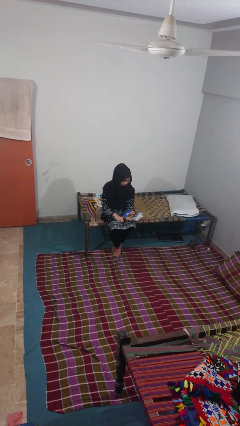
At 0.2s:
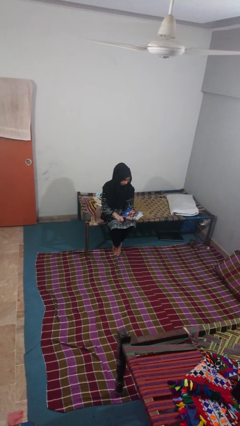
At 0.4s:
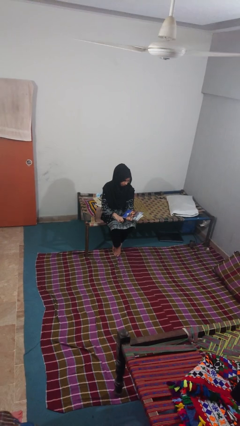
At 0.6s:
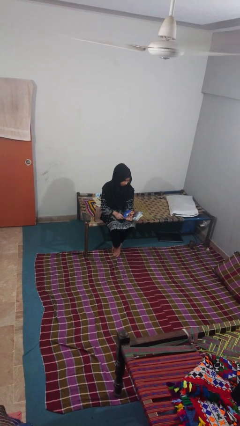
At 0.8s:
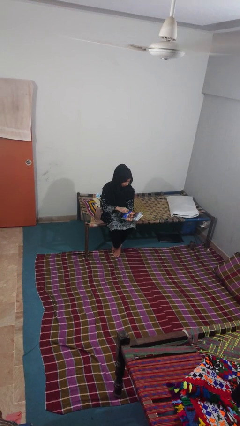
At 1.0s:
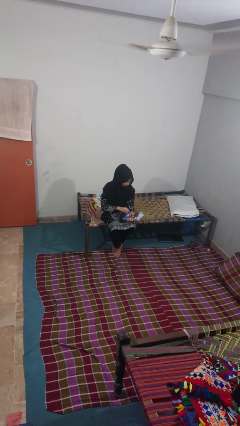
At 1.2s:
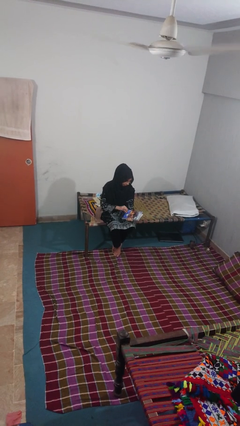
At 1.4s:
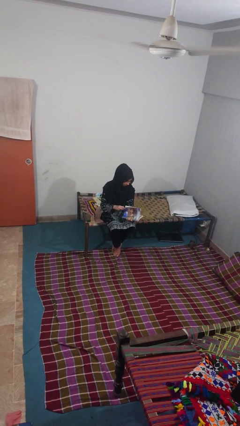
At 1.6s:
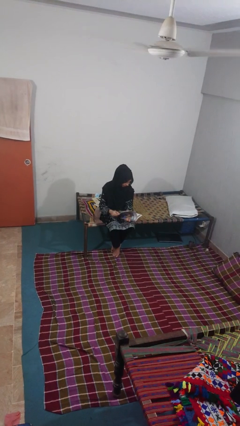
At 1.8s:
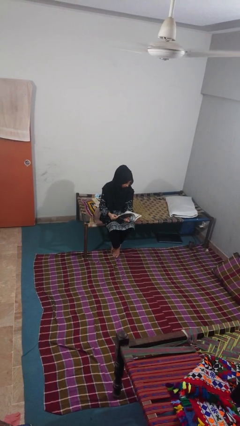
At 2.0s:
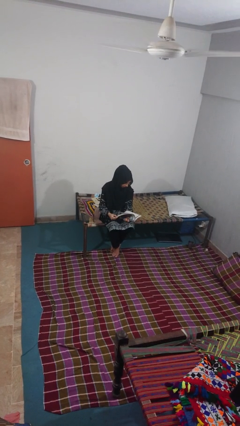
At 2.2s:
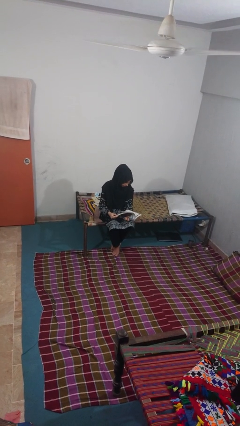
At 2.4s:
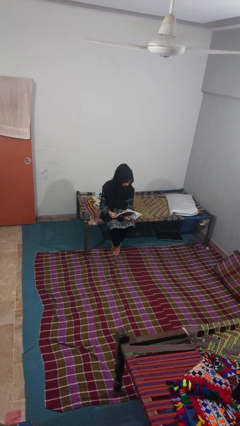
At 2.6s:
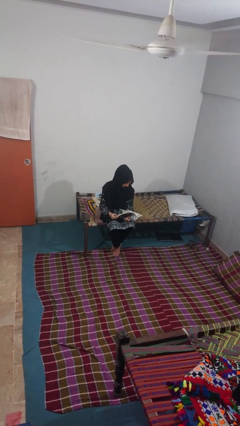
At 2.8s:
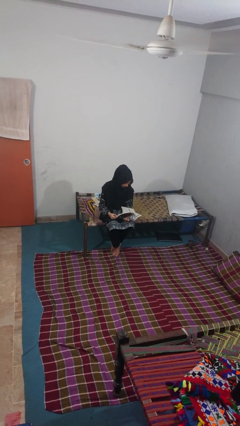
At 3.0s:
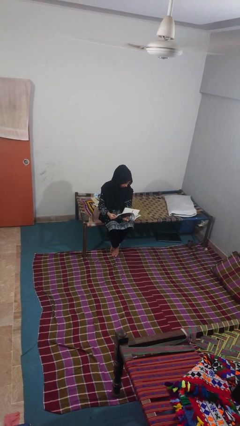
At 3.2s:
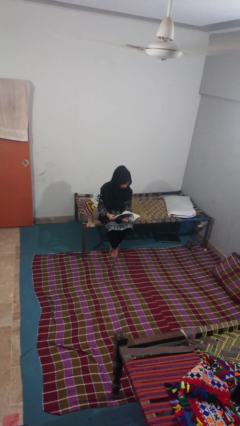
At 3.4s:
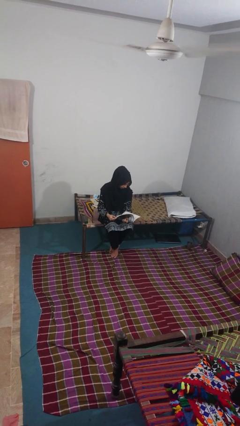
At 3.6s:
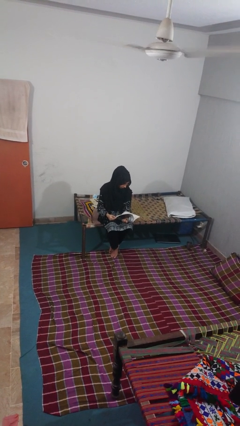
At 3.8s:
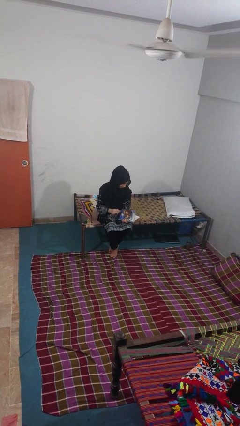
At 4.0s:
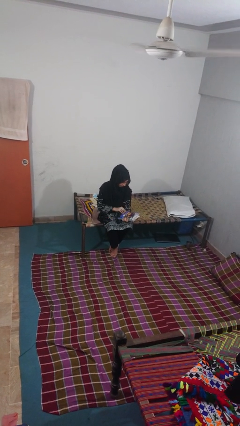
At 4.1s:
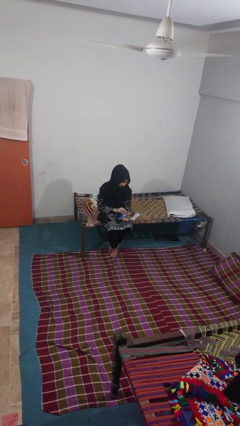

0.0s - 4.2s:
person reads book

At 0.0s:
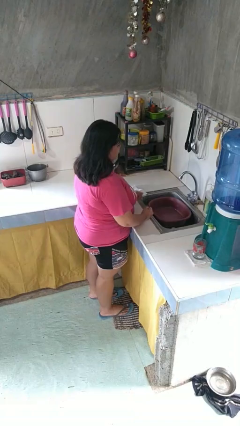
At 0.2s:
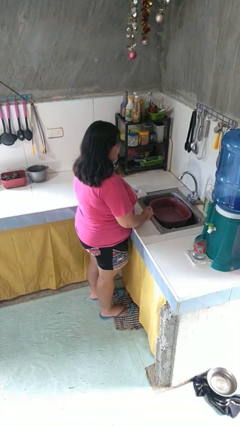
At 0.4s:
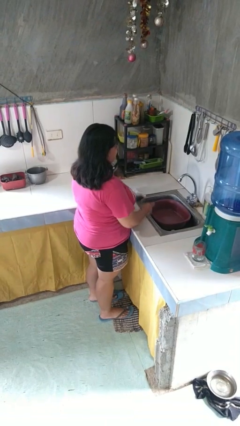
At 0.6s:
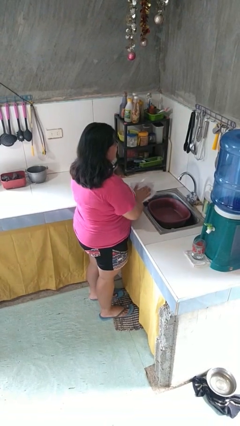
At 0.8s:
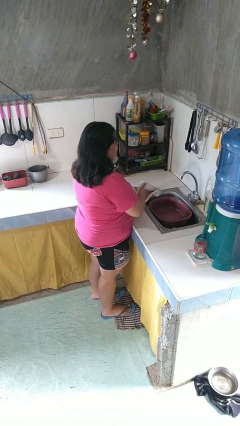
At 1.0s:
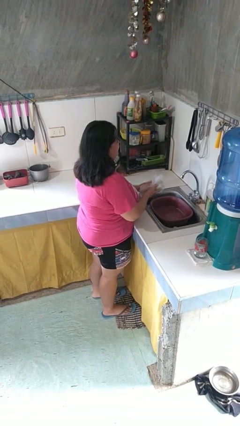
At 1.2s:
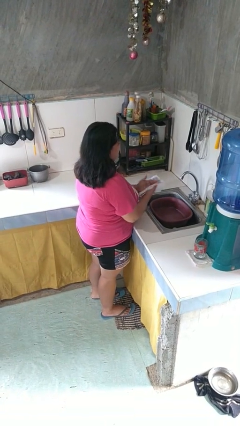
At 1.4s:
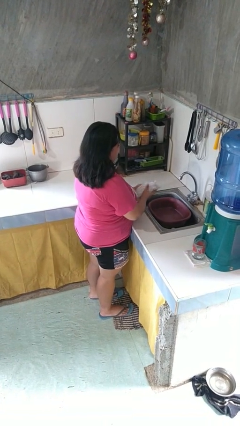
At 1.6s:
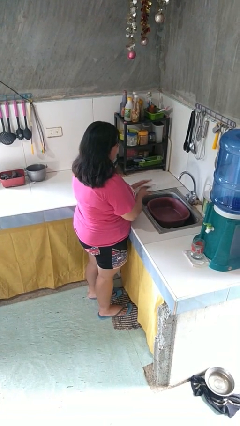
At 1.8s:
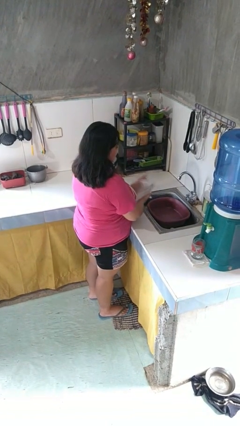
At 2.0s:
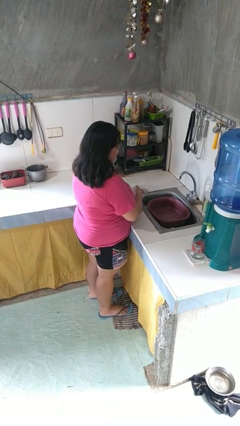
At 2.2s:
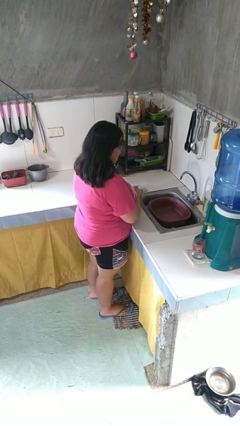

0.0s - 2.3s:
person dries hands with towel

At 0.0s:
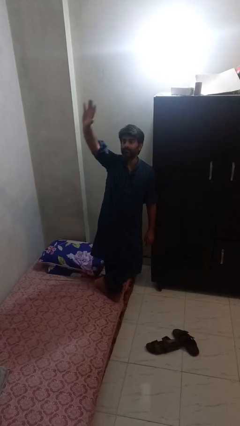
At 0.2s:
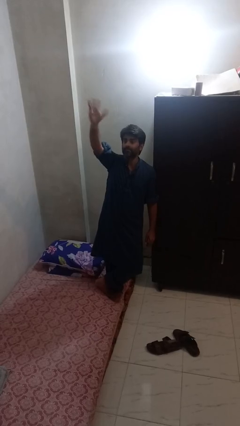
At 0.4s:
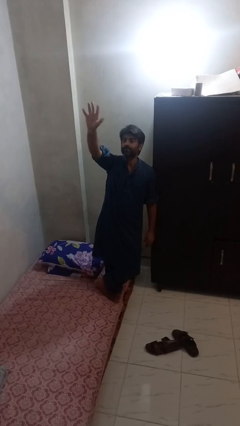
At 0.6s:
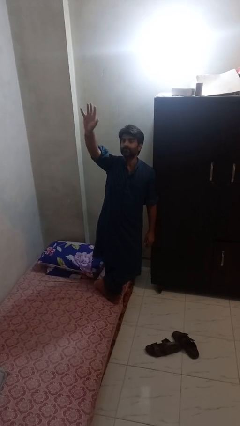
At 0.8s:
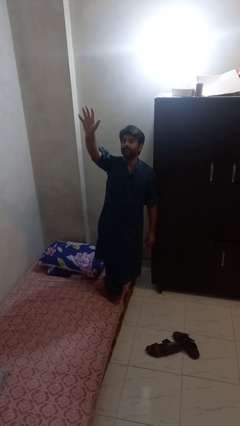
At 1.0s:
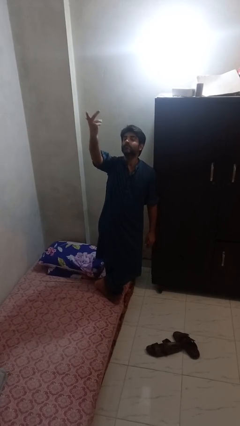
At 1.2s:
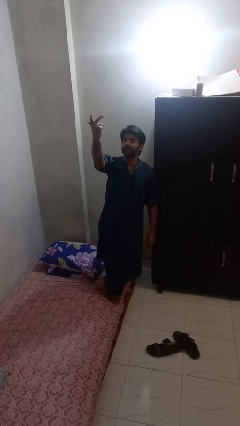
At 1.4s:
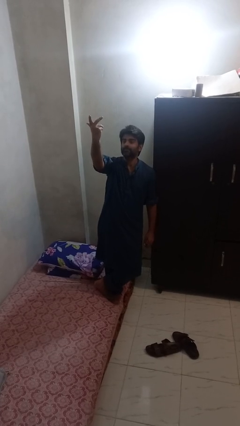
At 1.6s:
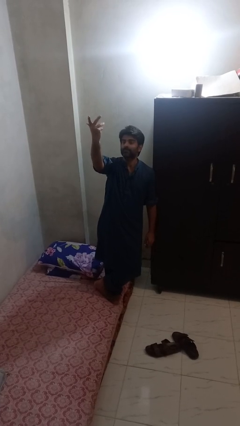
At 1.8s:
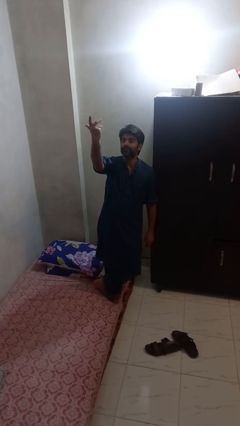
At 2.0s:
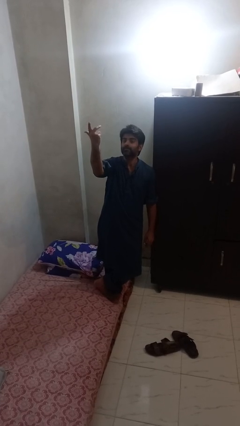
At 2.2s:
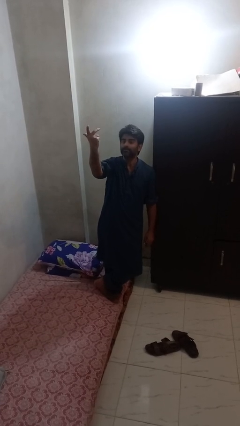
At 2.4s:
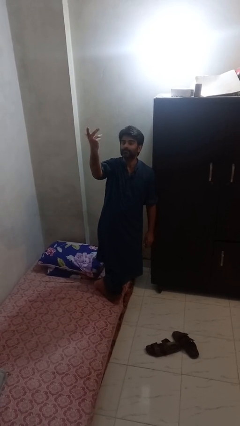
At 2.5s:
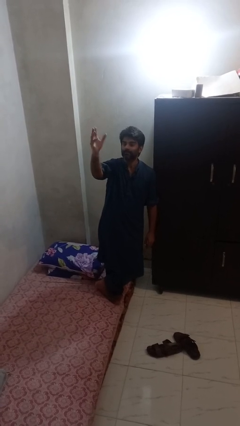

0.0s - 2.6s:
person gestures raise hand

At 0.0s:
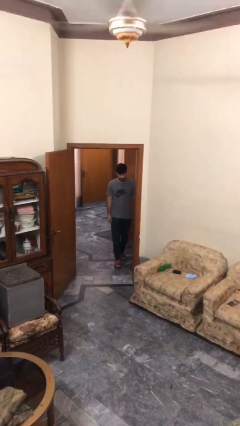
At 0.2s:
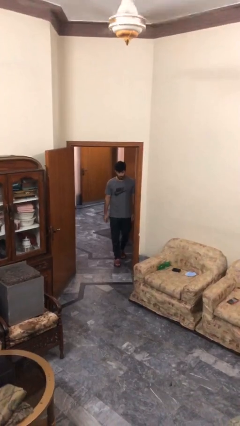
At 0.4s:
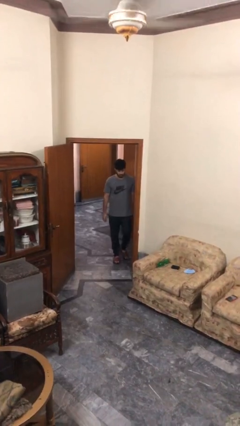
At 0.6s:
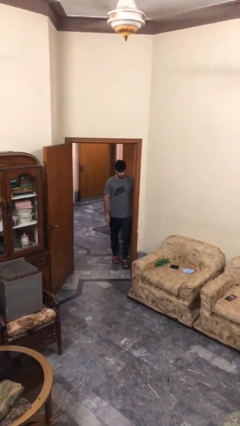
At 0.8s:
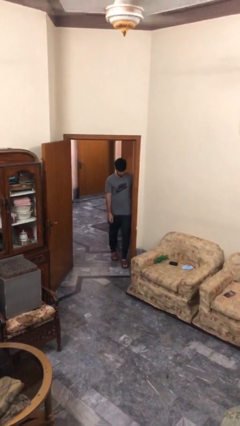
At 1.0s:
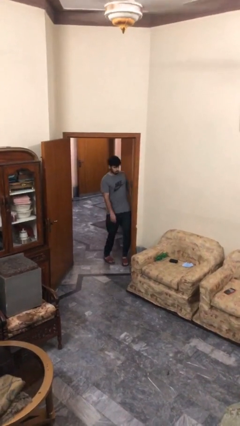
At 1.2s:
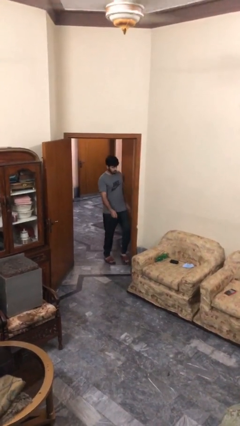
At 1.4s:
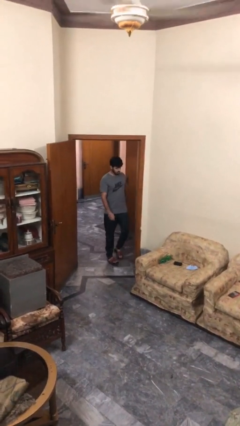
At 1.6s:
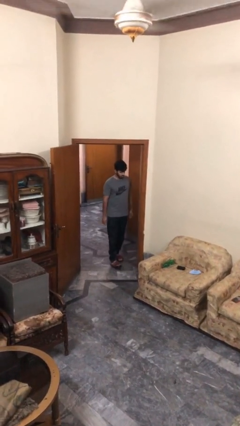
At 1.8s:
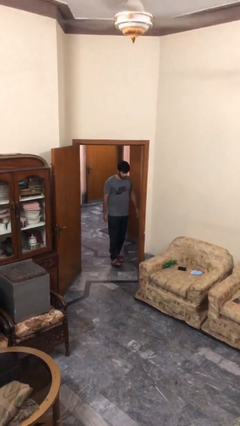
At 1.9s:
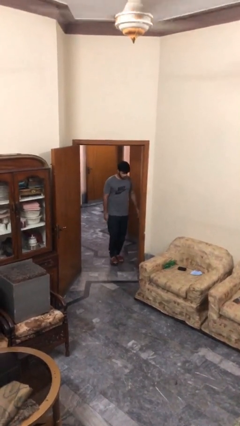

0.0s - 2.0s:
person bumps into wall

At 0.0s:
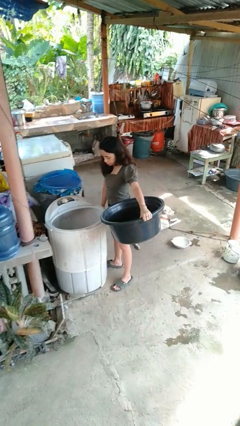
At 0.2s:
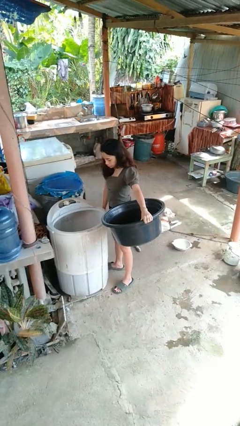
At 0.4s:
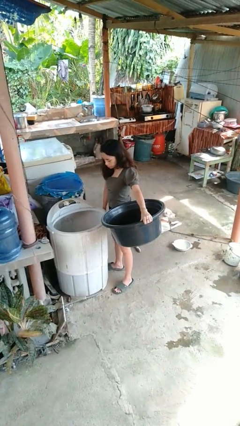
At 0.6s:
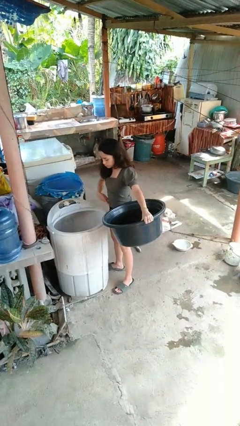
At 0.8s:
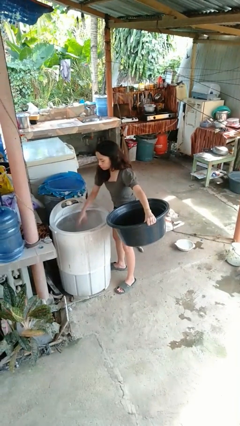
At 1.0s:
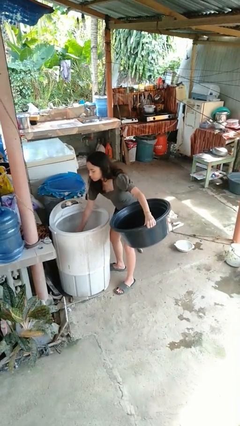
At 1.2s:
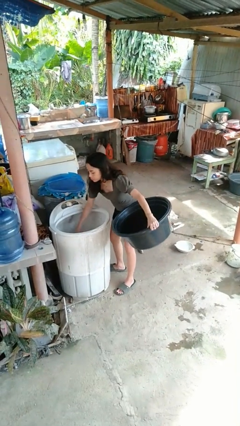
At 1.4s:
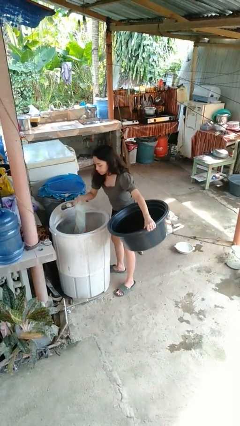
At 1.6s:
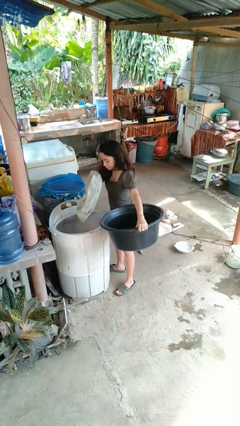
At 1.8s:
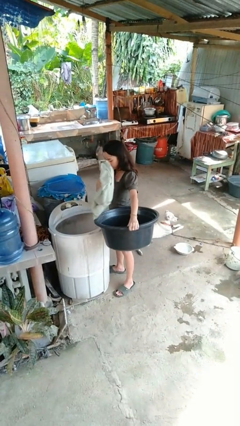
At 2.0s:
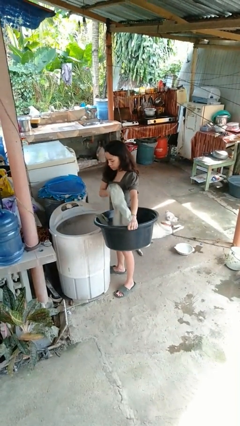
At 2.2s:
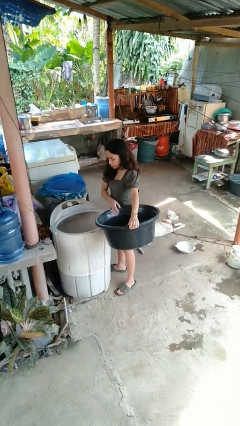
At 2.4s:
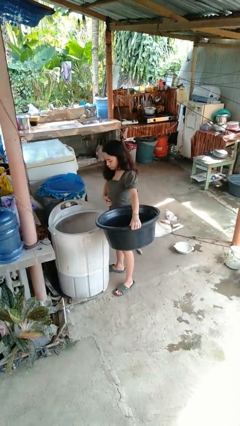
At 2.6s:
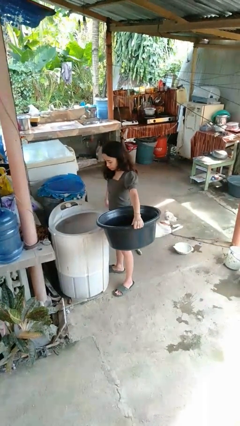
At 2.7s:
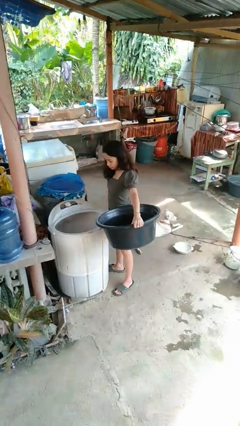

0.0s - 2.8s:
person unloads clotheswasher

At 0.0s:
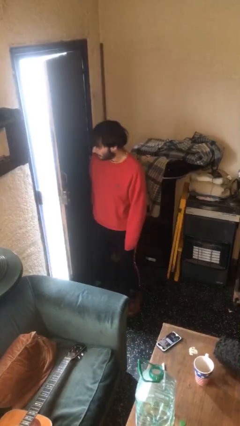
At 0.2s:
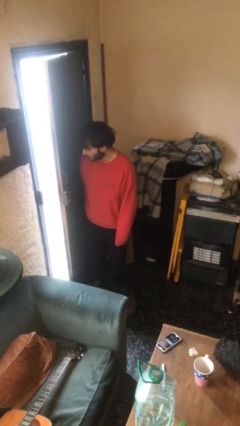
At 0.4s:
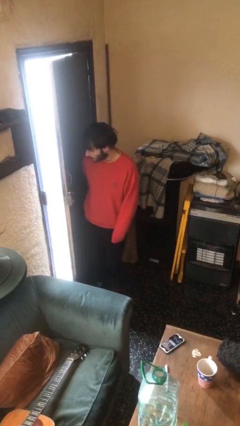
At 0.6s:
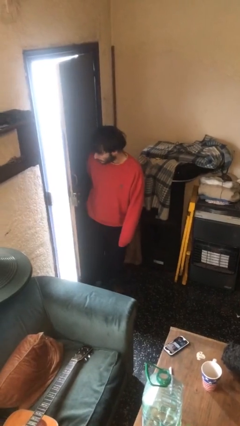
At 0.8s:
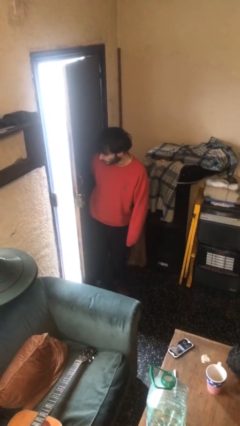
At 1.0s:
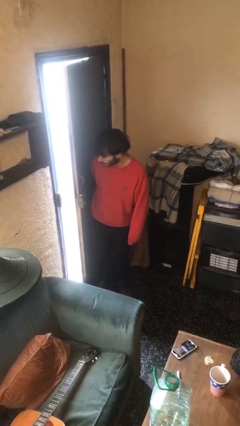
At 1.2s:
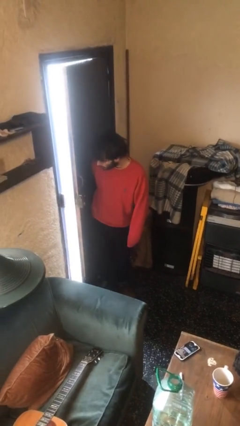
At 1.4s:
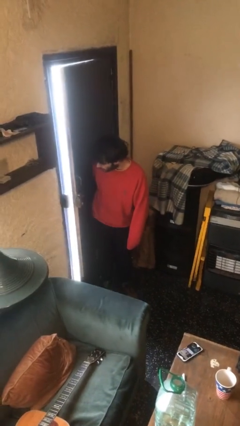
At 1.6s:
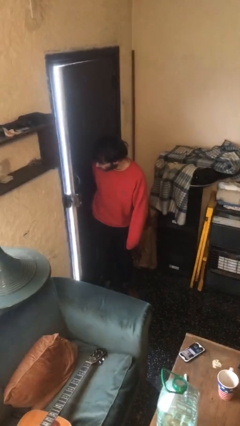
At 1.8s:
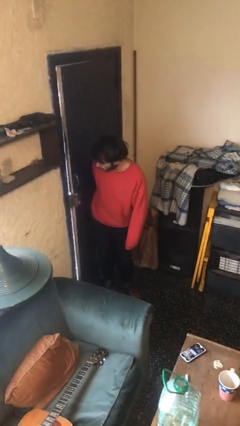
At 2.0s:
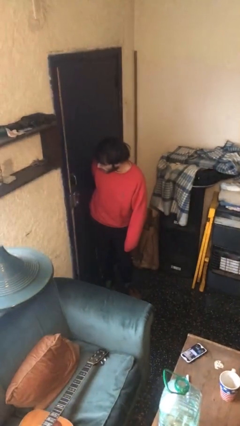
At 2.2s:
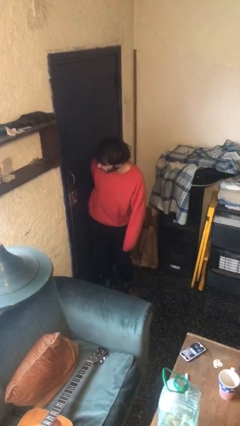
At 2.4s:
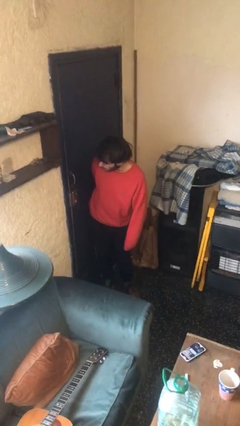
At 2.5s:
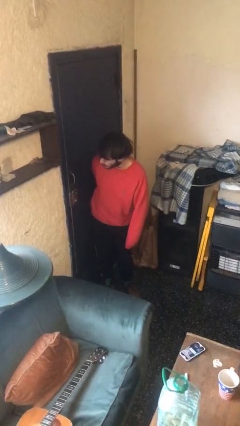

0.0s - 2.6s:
person closes door with hip

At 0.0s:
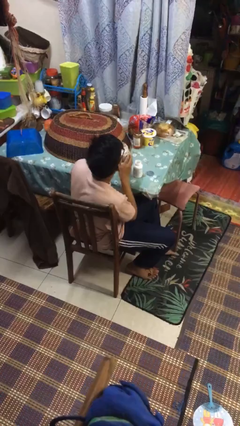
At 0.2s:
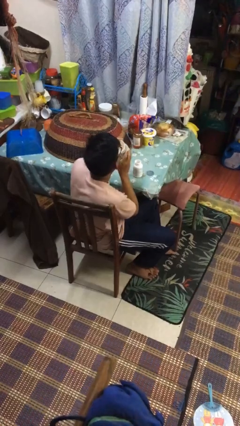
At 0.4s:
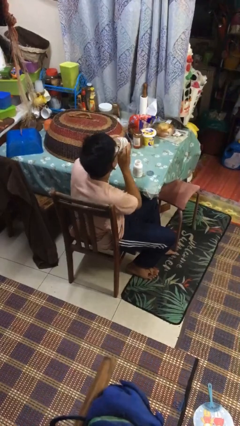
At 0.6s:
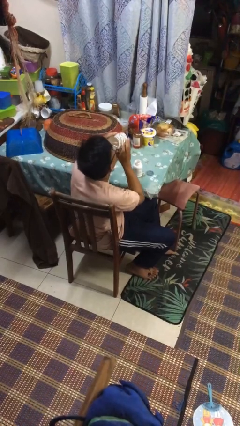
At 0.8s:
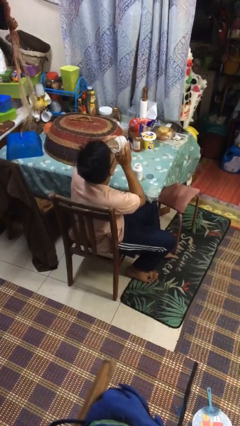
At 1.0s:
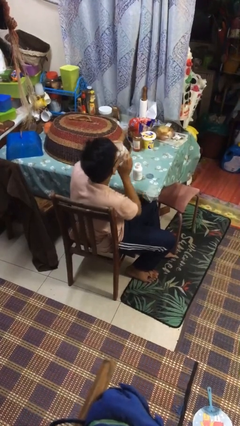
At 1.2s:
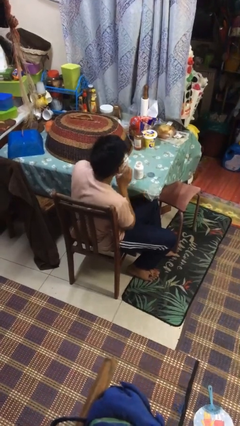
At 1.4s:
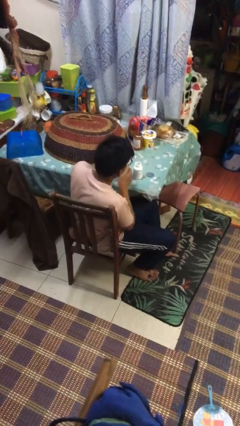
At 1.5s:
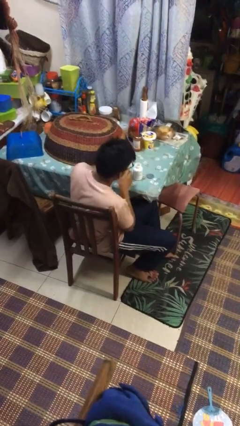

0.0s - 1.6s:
person drinks from cup
